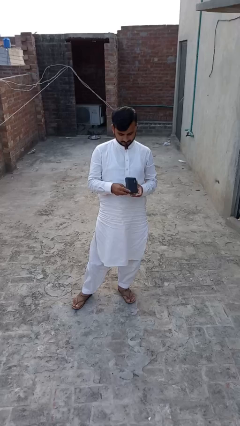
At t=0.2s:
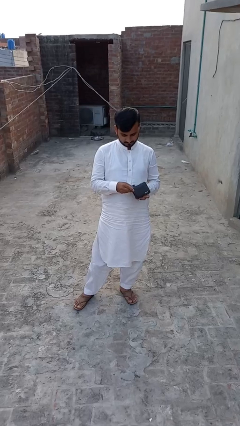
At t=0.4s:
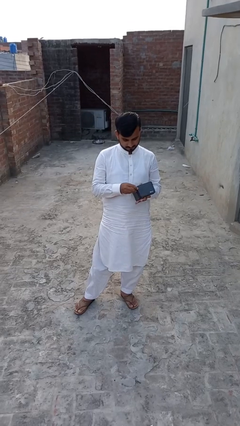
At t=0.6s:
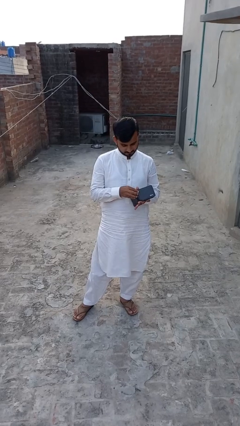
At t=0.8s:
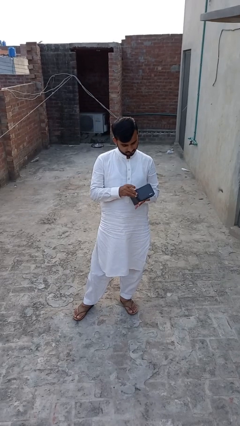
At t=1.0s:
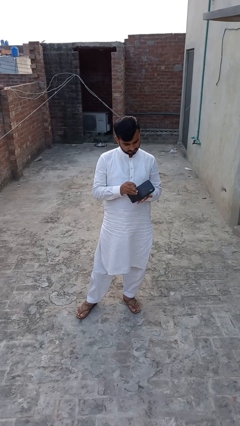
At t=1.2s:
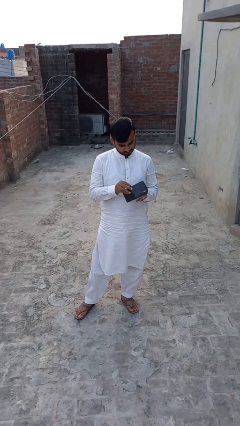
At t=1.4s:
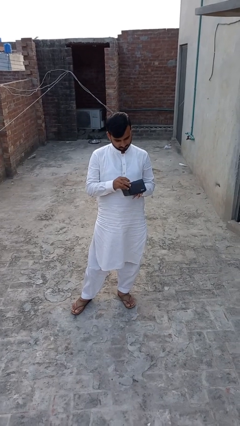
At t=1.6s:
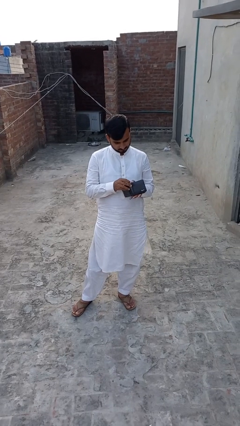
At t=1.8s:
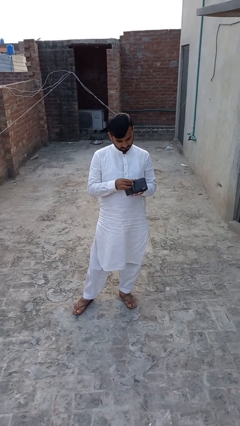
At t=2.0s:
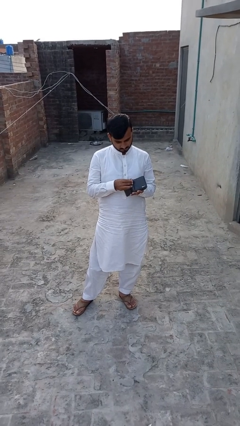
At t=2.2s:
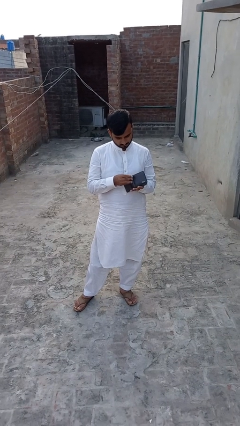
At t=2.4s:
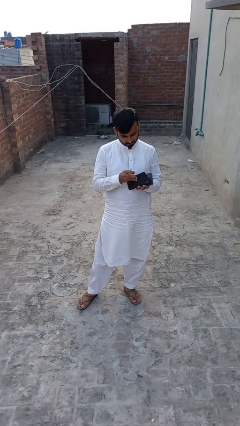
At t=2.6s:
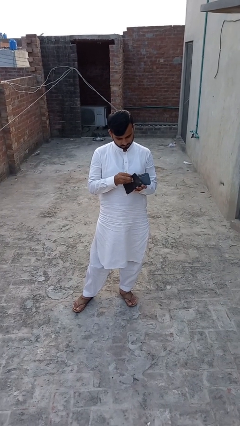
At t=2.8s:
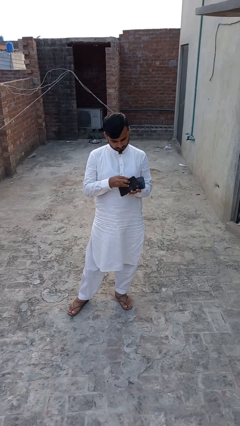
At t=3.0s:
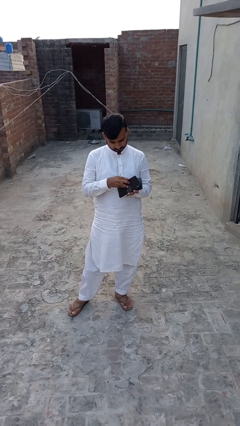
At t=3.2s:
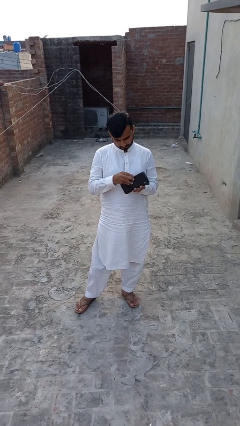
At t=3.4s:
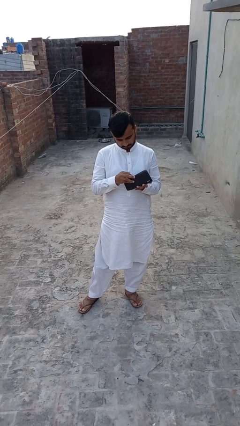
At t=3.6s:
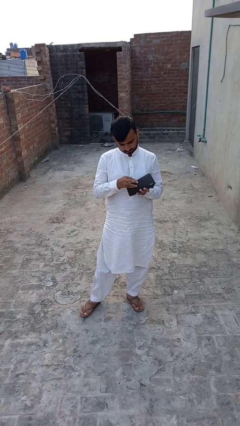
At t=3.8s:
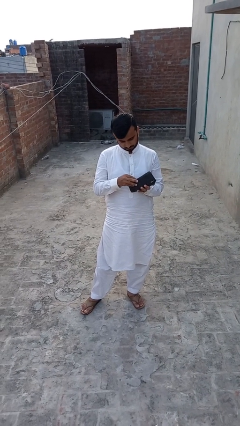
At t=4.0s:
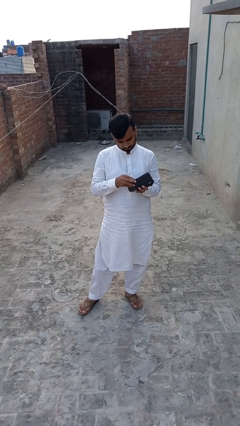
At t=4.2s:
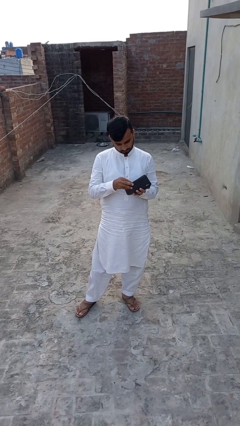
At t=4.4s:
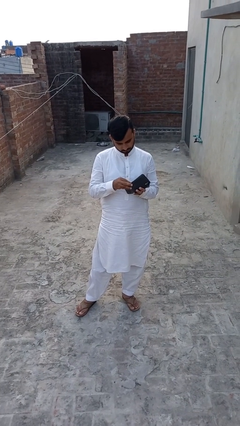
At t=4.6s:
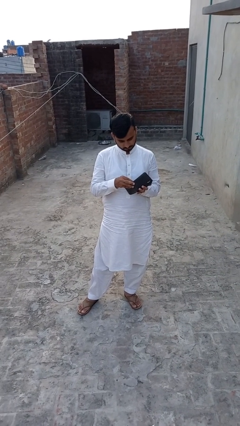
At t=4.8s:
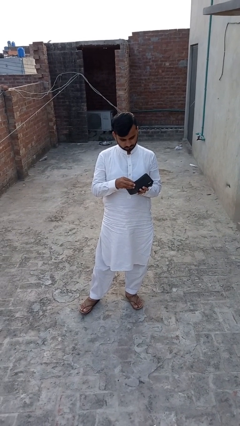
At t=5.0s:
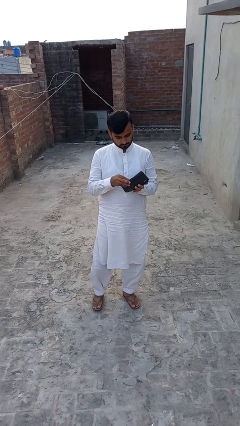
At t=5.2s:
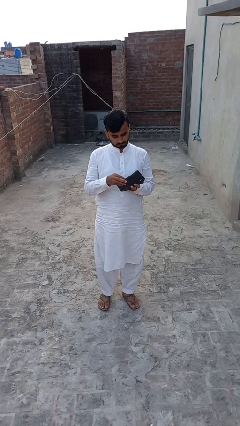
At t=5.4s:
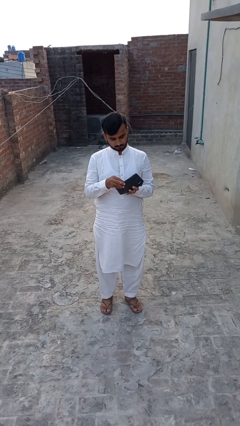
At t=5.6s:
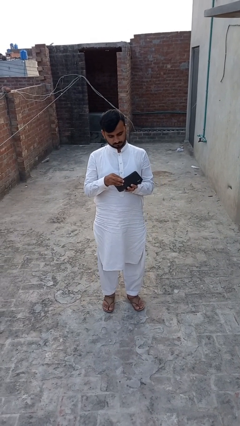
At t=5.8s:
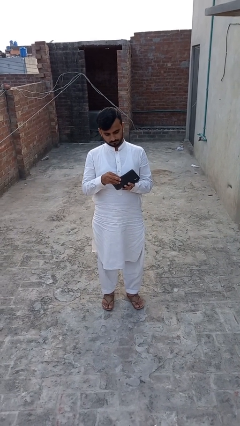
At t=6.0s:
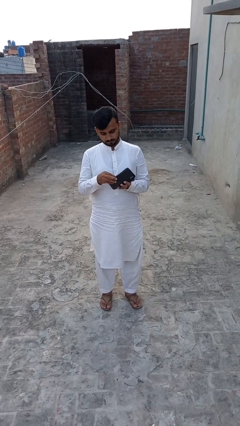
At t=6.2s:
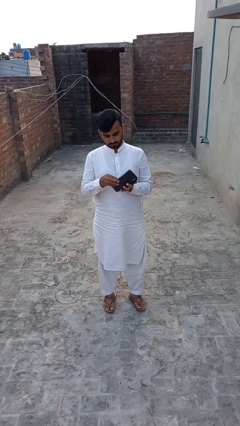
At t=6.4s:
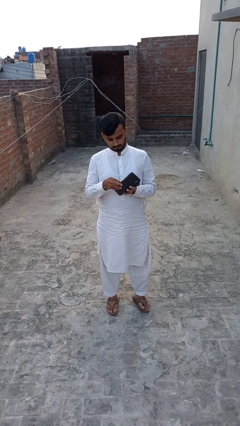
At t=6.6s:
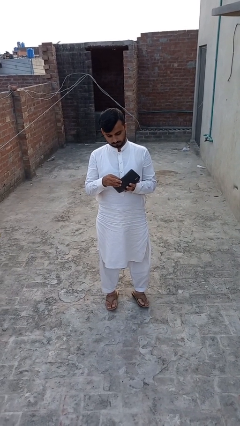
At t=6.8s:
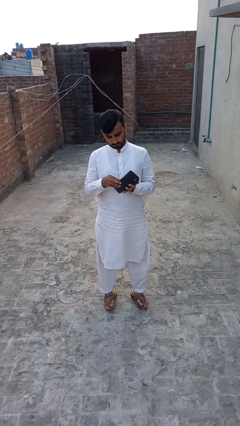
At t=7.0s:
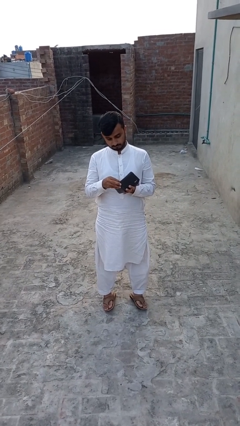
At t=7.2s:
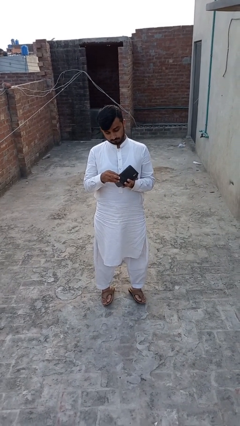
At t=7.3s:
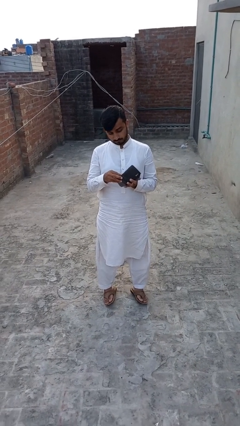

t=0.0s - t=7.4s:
person searches in purse

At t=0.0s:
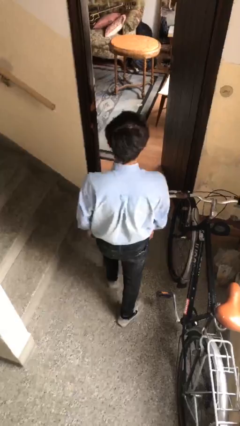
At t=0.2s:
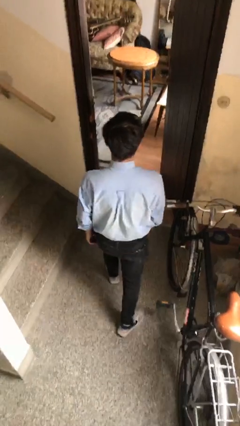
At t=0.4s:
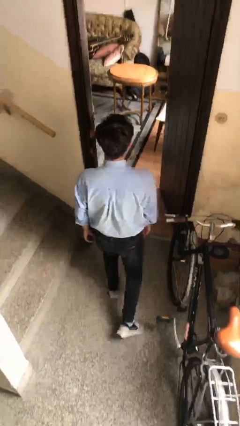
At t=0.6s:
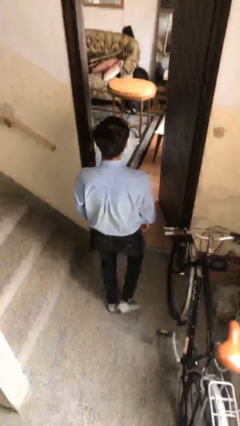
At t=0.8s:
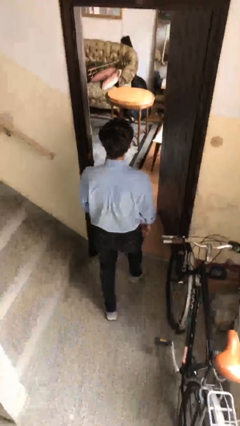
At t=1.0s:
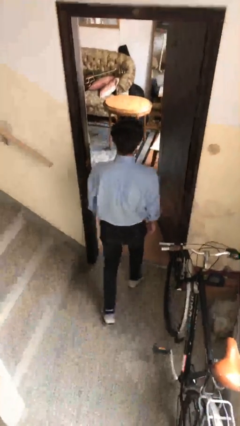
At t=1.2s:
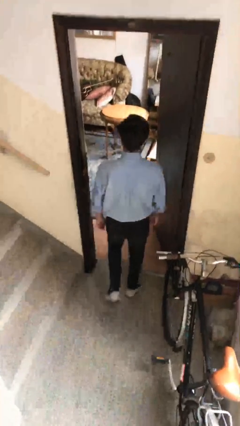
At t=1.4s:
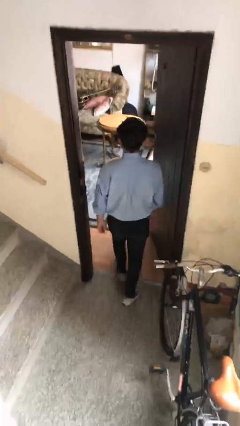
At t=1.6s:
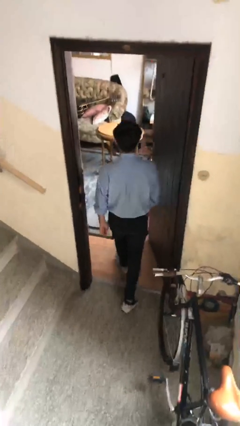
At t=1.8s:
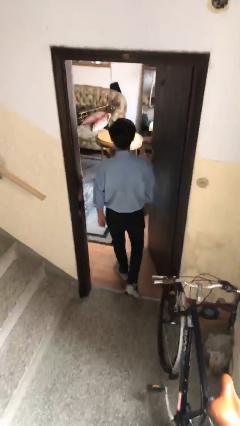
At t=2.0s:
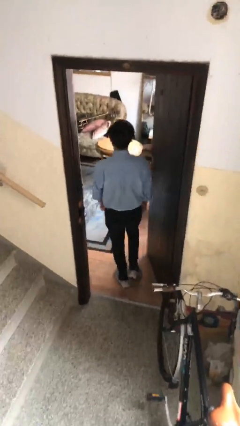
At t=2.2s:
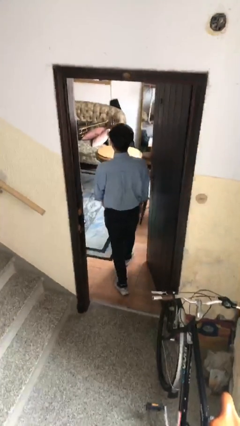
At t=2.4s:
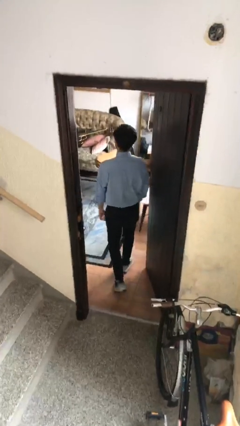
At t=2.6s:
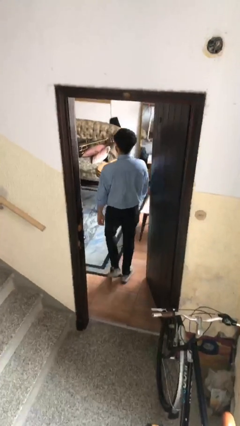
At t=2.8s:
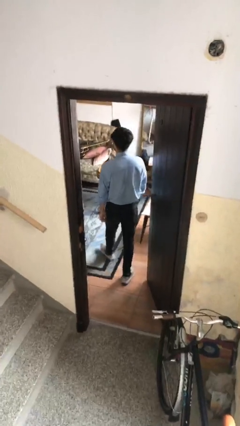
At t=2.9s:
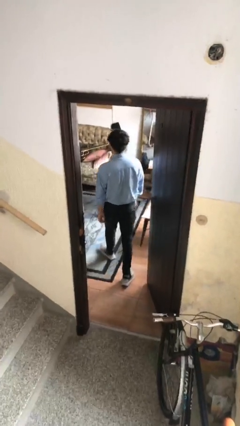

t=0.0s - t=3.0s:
person exits scene through structure

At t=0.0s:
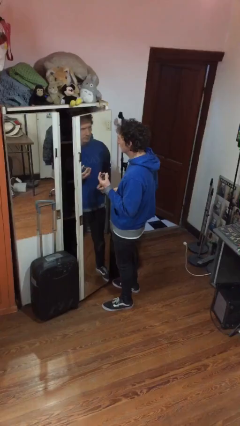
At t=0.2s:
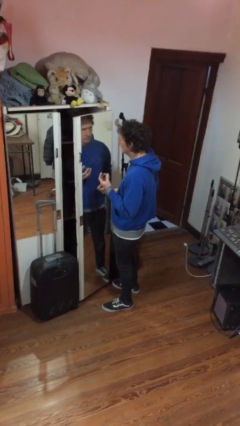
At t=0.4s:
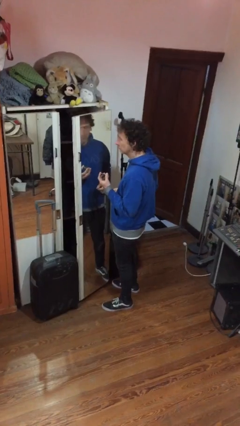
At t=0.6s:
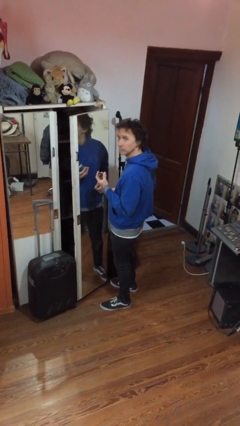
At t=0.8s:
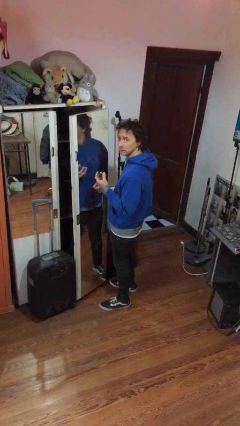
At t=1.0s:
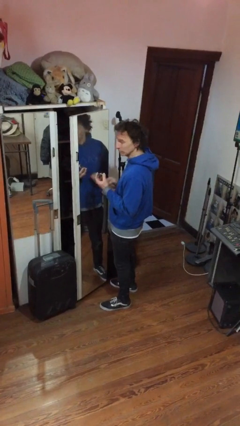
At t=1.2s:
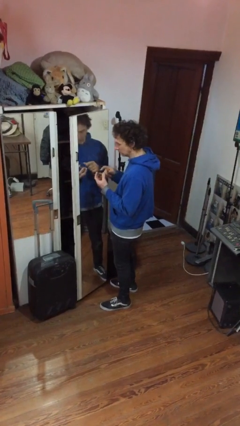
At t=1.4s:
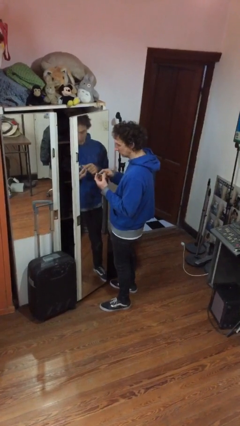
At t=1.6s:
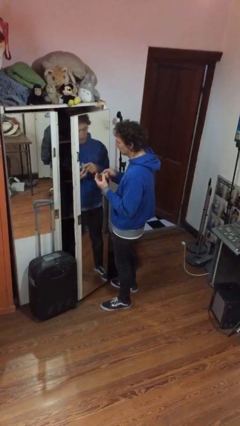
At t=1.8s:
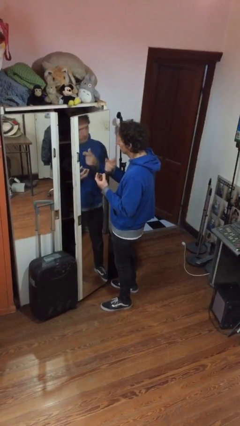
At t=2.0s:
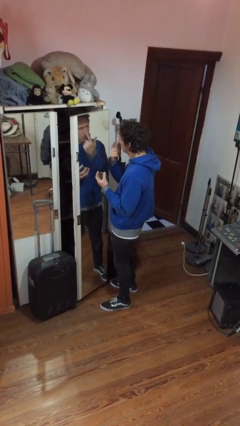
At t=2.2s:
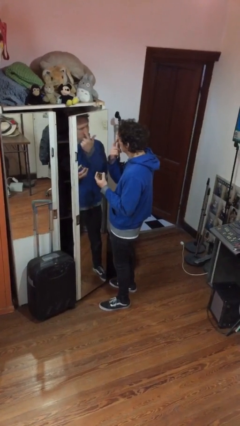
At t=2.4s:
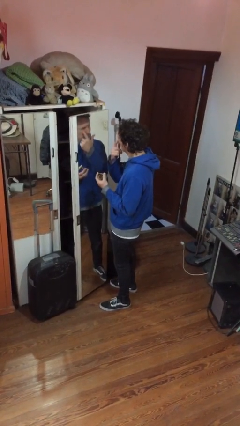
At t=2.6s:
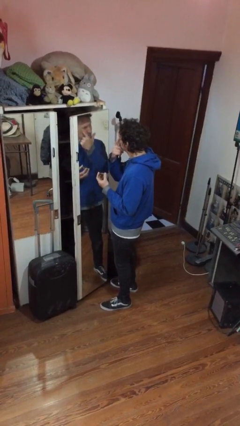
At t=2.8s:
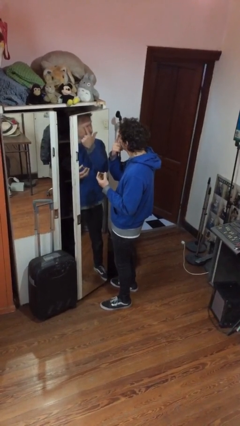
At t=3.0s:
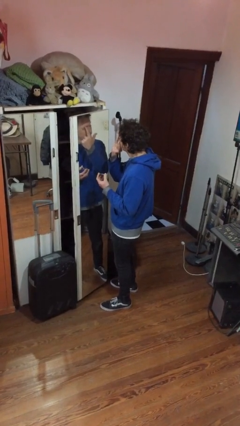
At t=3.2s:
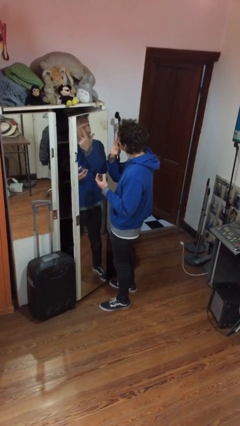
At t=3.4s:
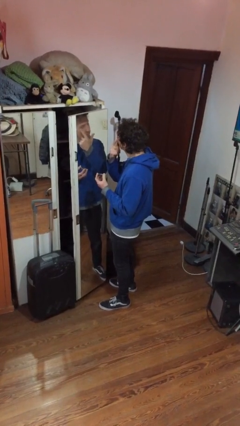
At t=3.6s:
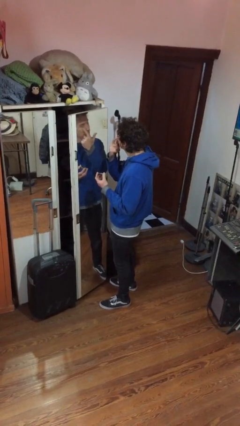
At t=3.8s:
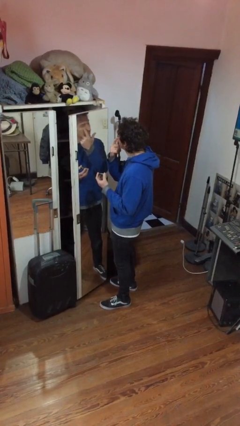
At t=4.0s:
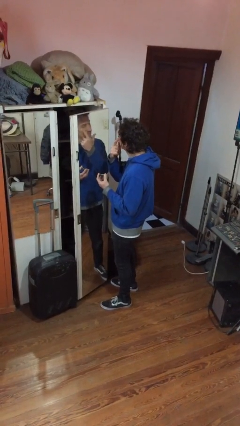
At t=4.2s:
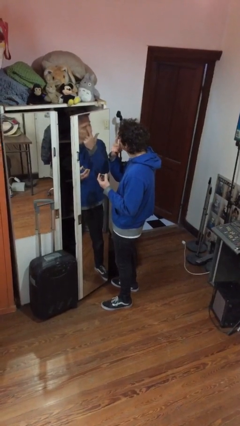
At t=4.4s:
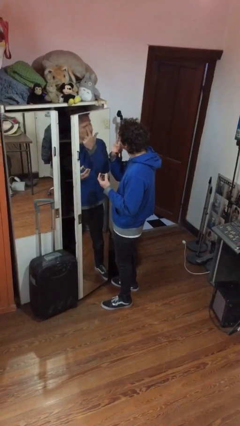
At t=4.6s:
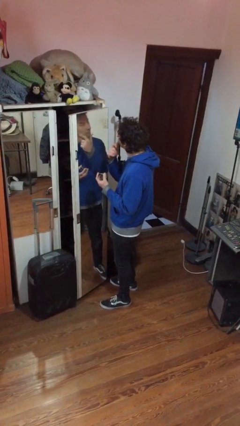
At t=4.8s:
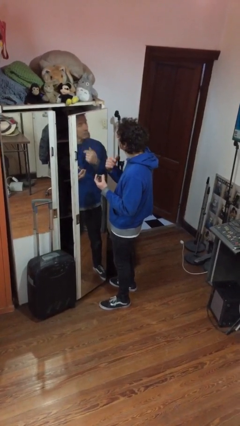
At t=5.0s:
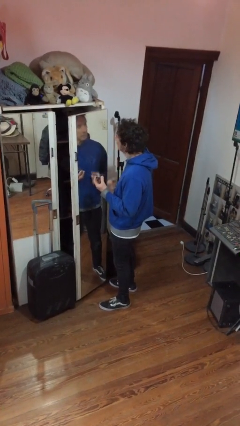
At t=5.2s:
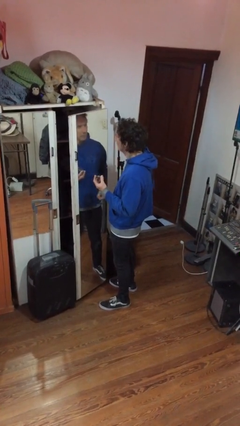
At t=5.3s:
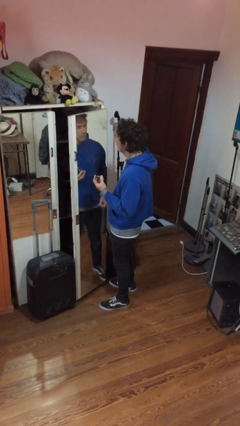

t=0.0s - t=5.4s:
person applies eye makeup

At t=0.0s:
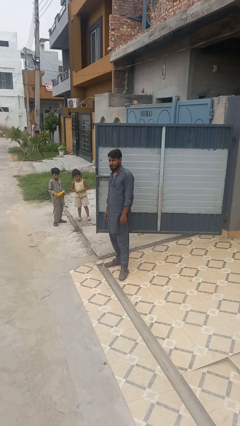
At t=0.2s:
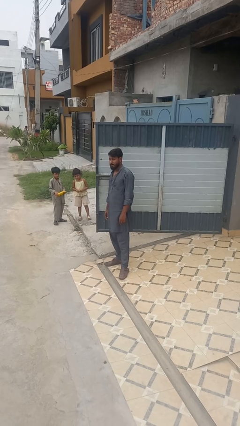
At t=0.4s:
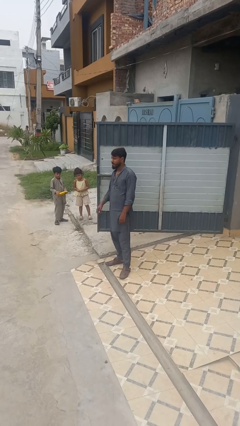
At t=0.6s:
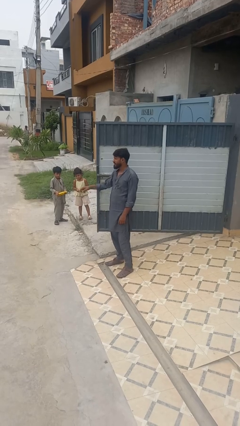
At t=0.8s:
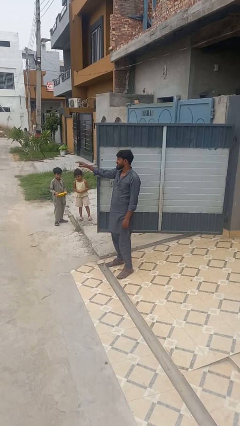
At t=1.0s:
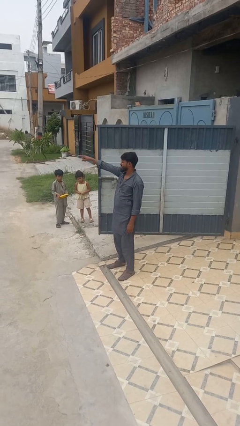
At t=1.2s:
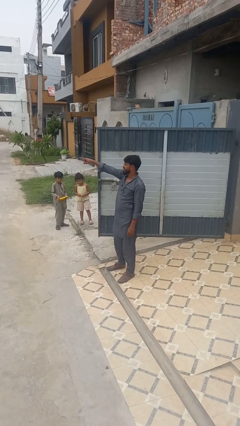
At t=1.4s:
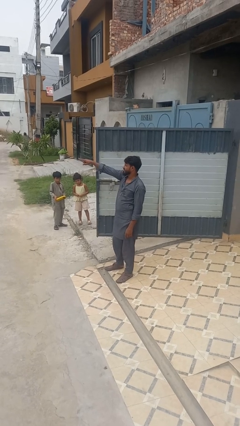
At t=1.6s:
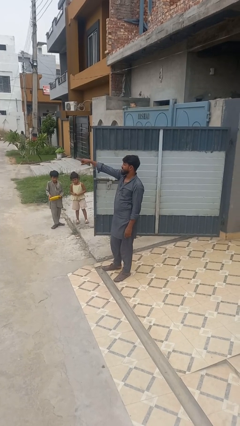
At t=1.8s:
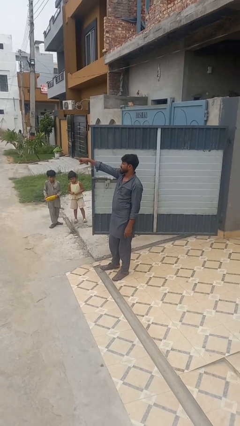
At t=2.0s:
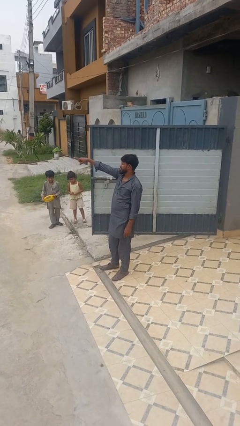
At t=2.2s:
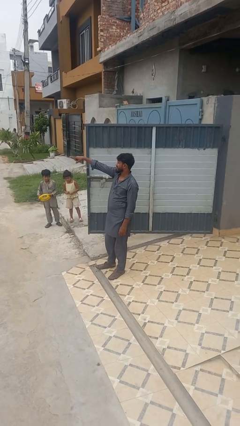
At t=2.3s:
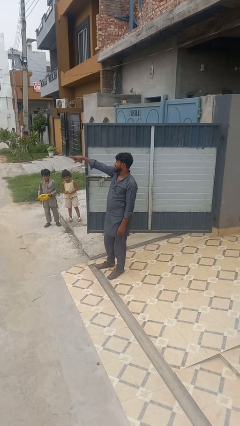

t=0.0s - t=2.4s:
person points at person
